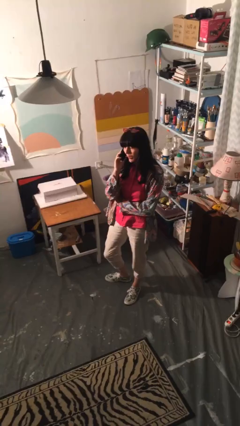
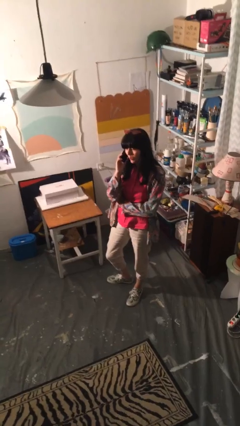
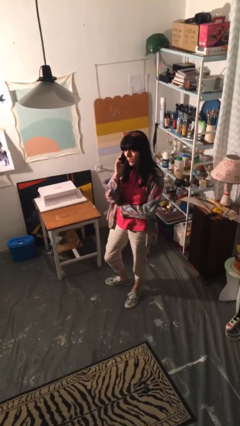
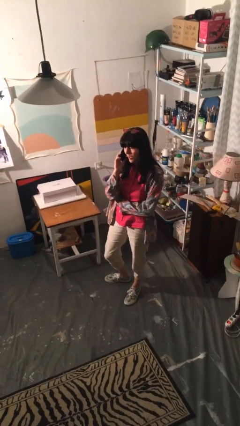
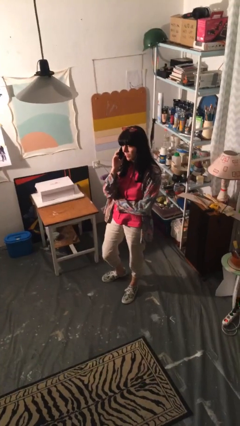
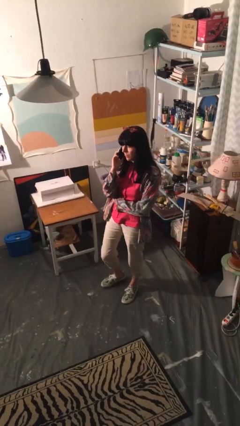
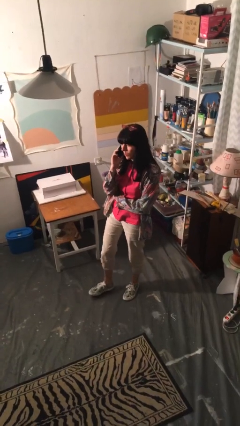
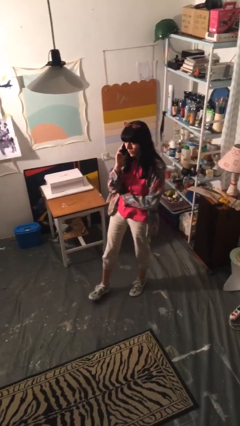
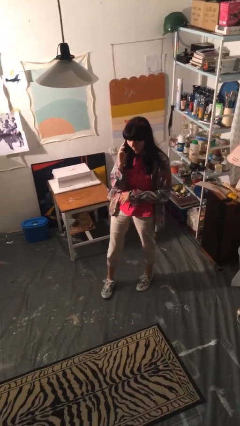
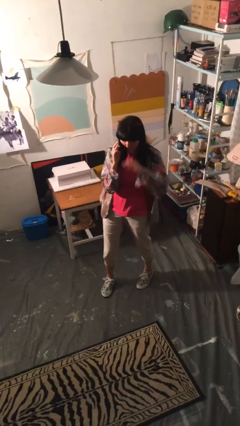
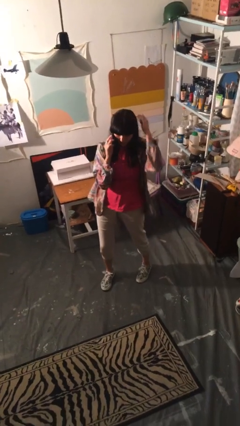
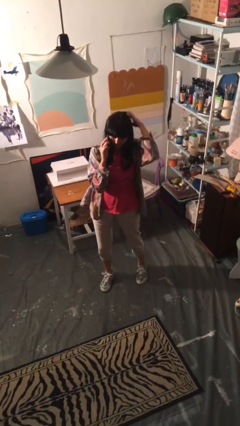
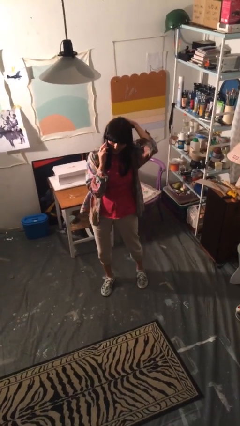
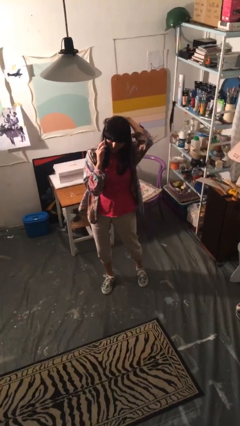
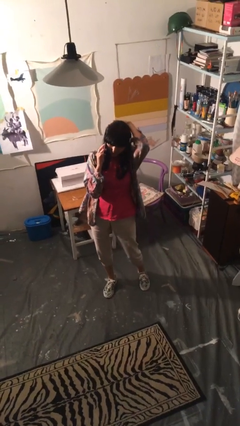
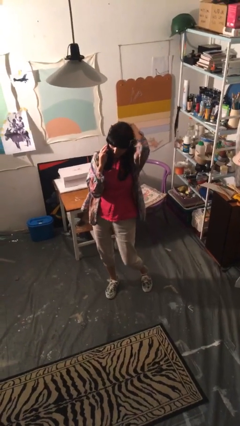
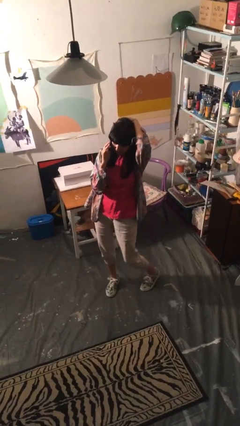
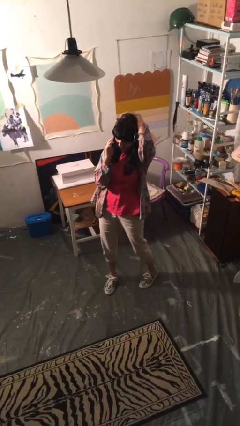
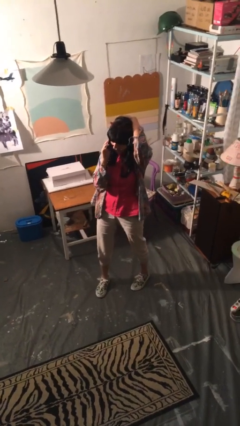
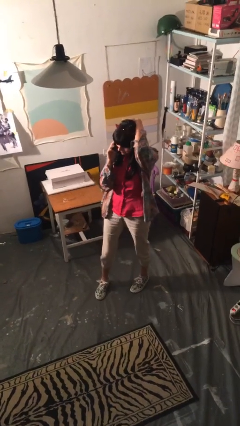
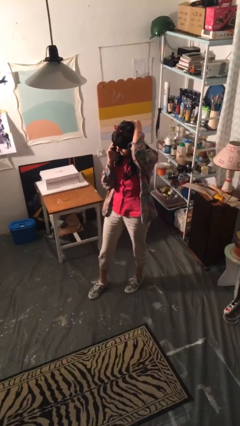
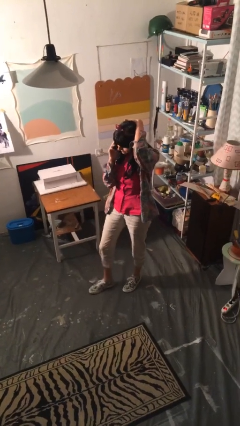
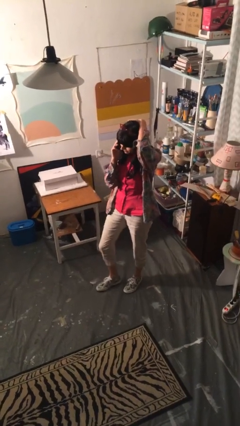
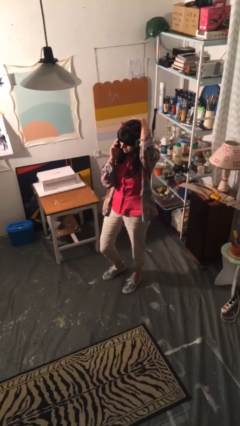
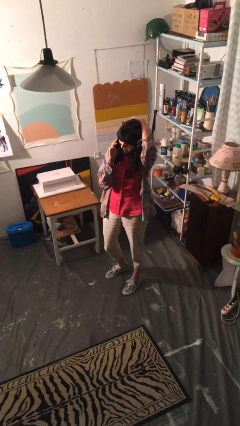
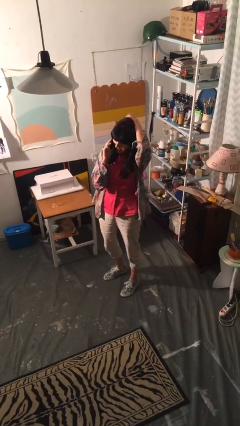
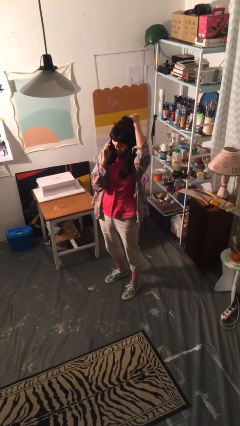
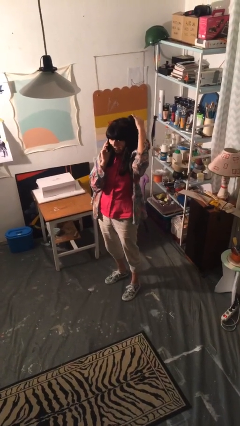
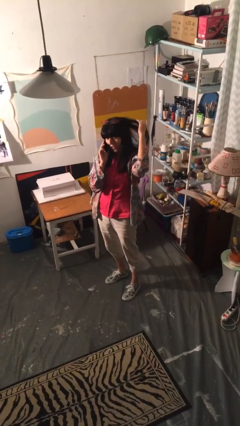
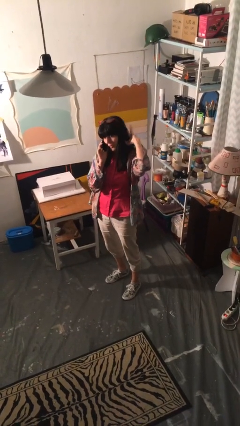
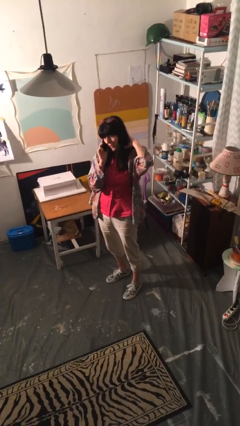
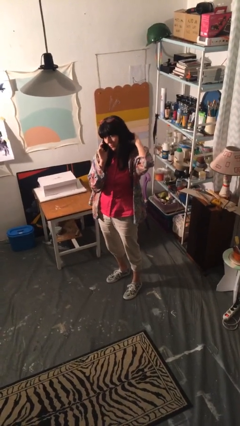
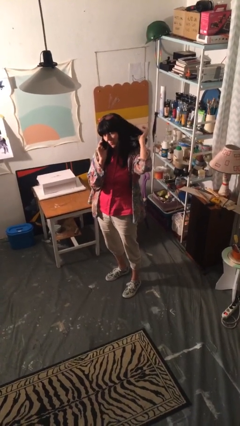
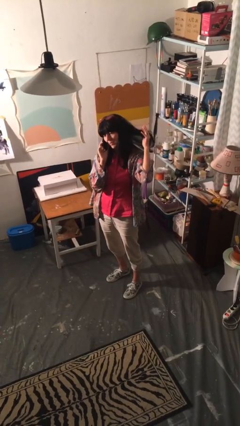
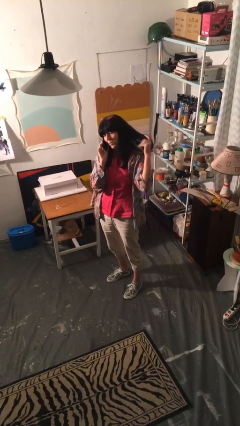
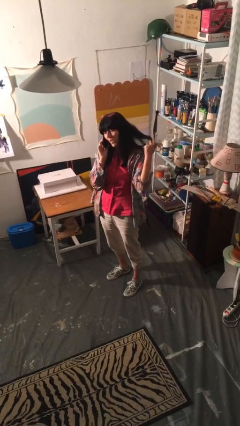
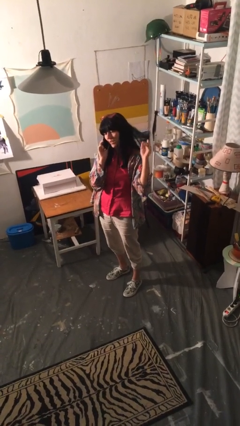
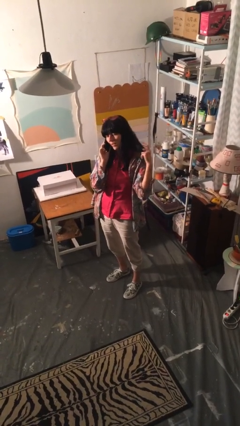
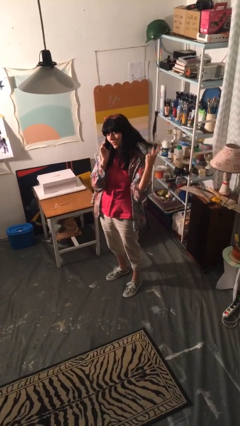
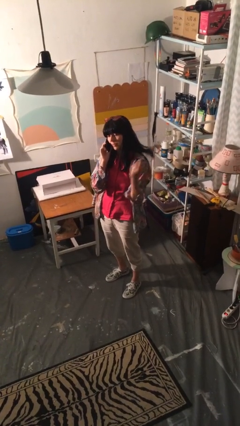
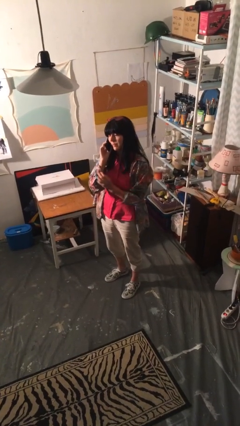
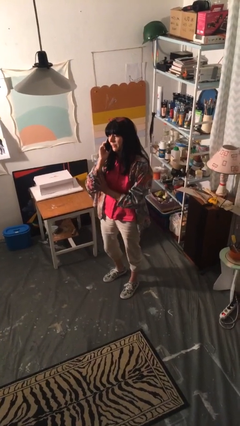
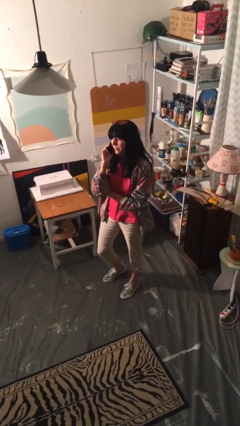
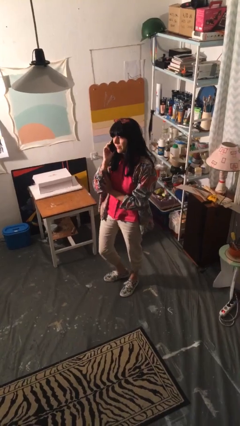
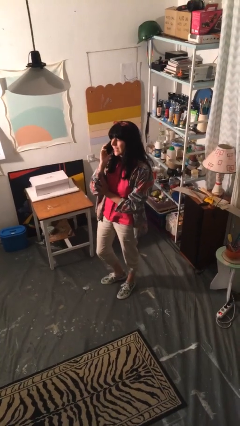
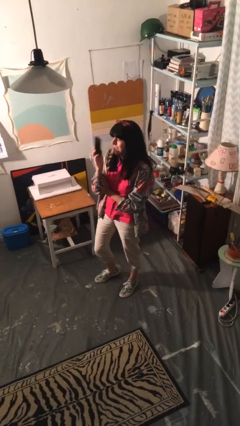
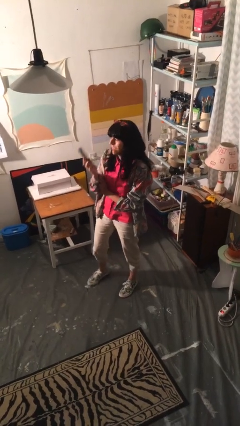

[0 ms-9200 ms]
person talks on phone

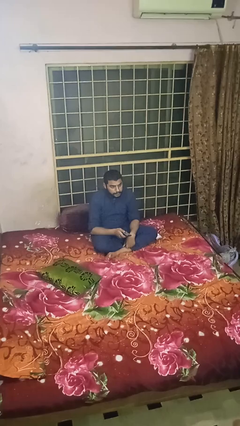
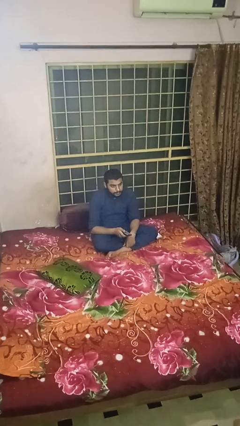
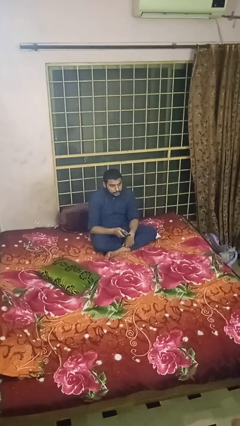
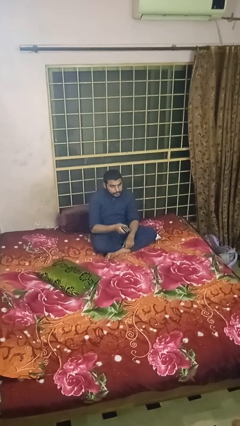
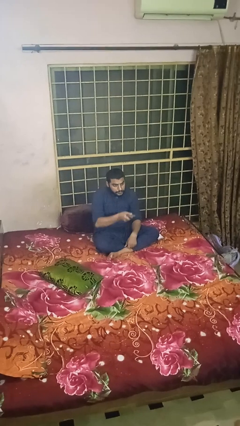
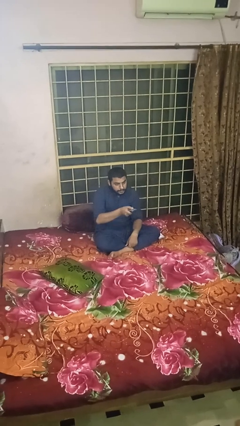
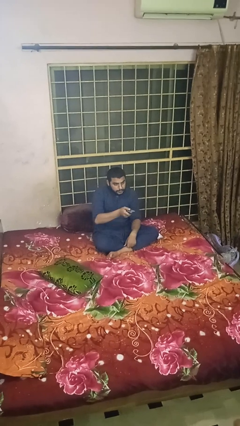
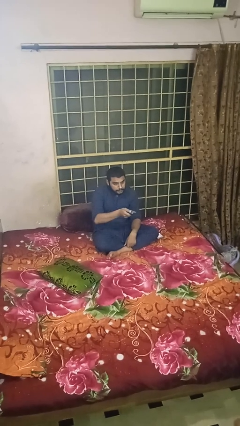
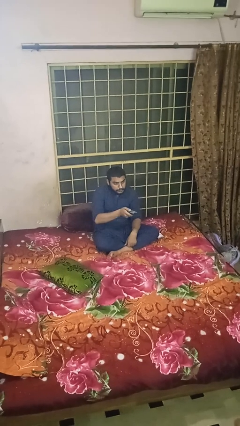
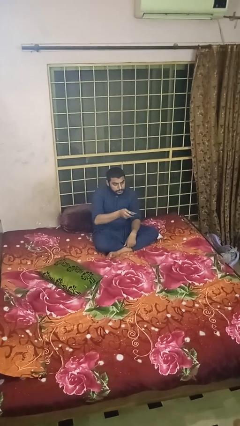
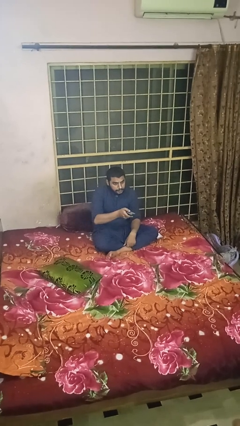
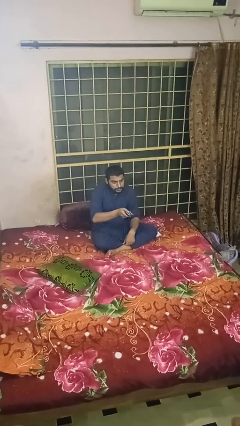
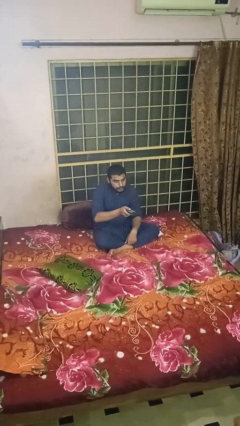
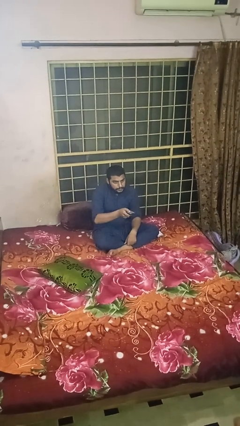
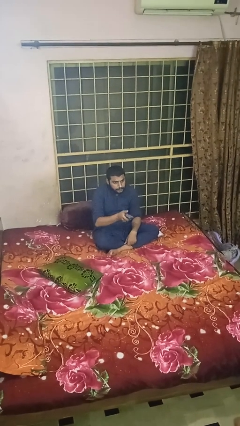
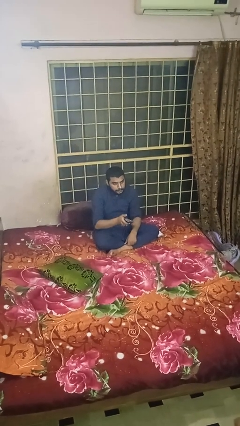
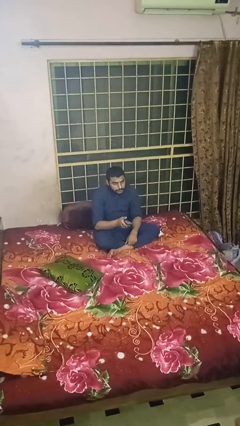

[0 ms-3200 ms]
person uses television remote

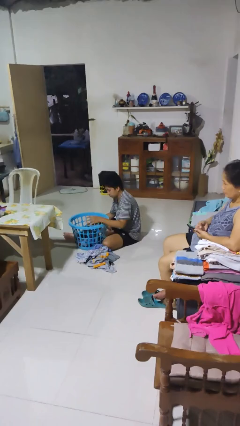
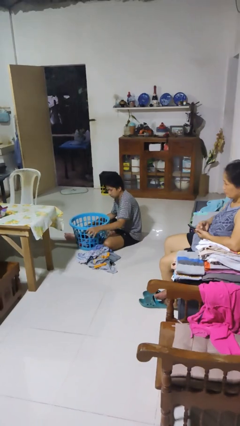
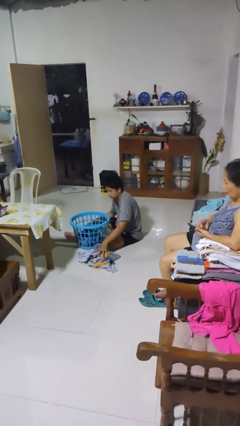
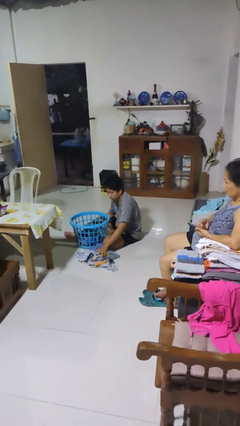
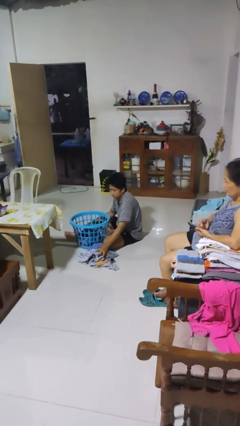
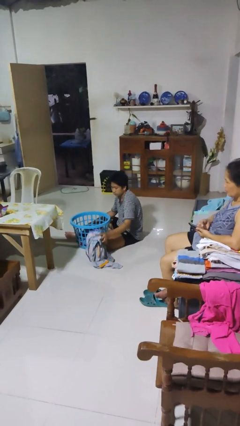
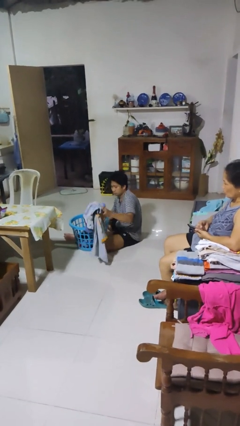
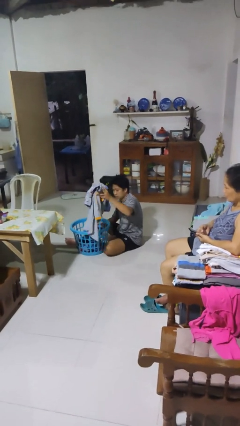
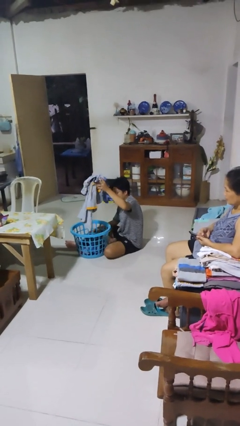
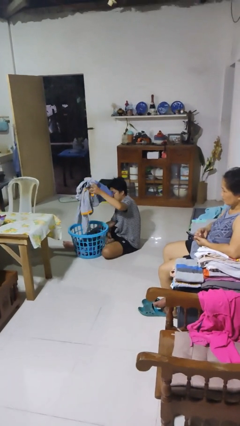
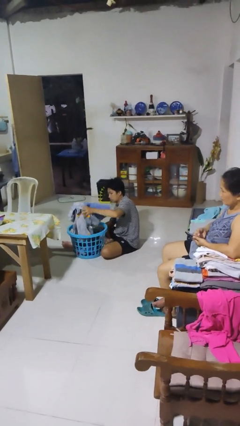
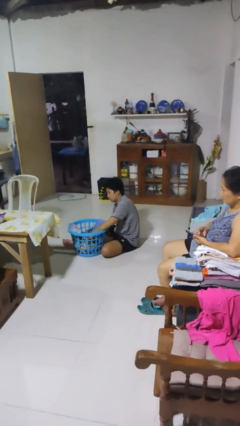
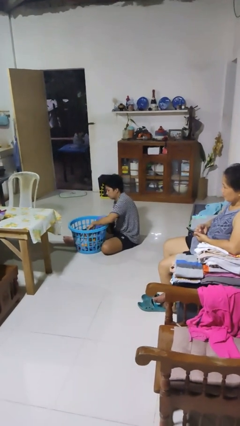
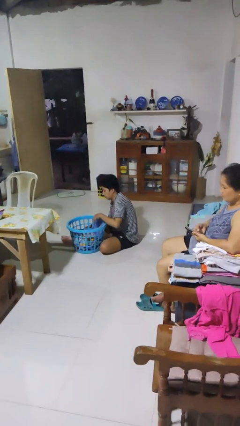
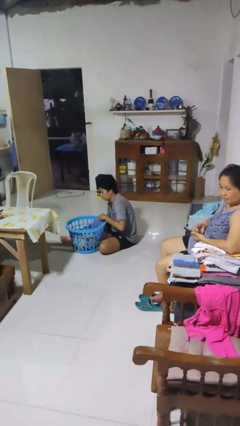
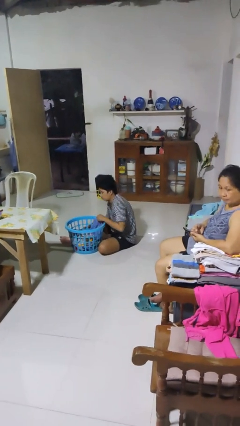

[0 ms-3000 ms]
person loads clotheswasher

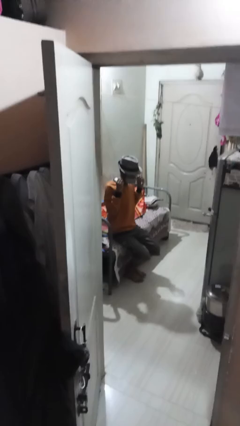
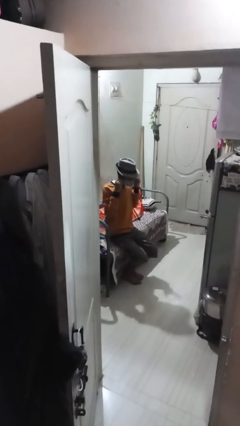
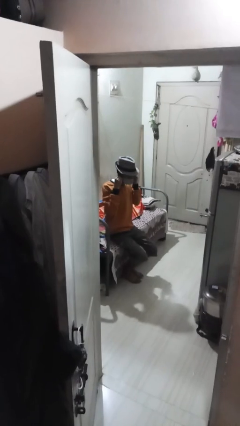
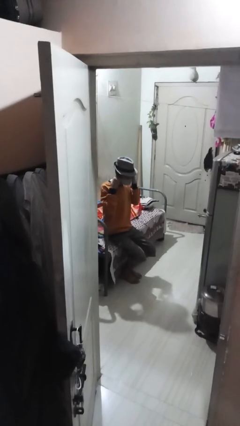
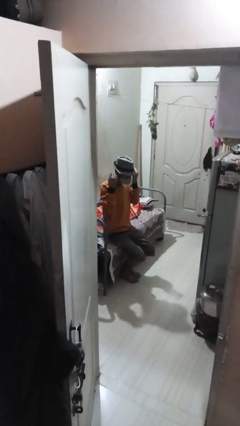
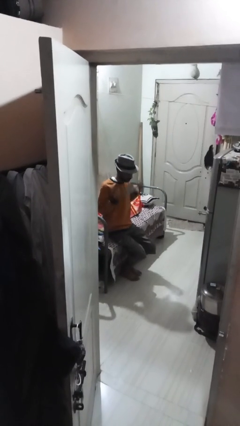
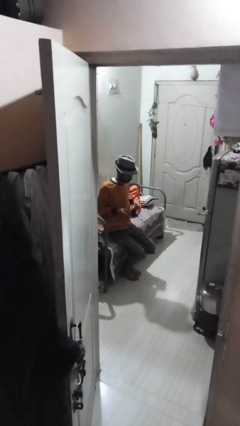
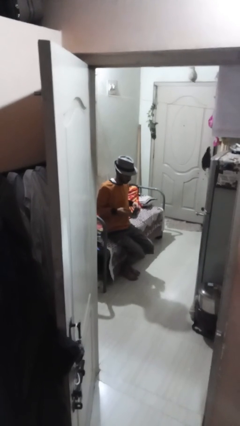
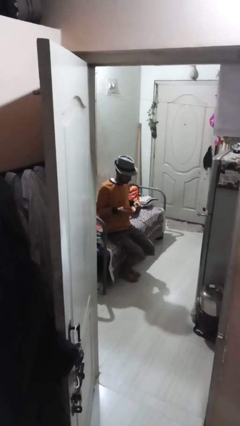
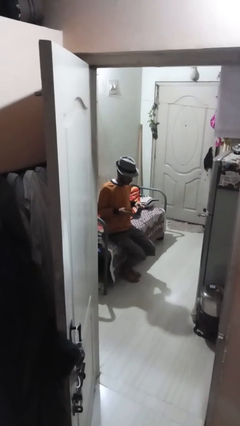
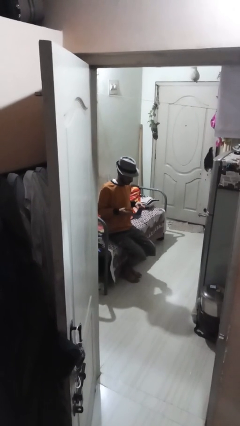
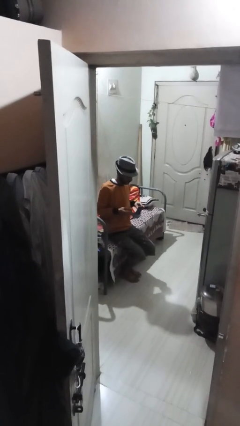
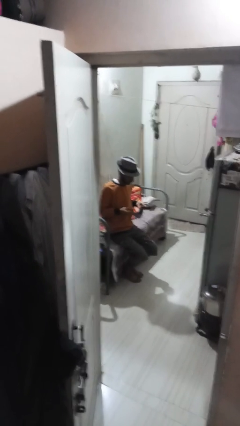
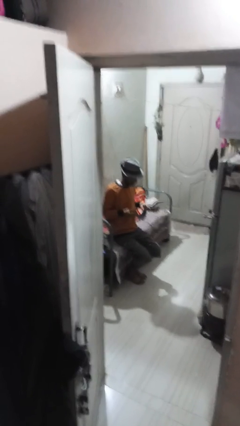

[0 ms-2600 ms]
person takes off facemask
